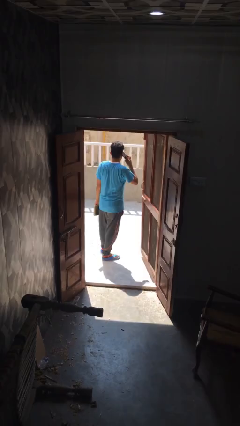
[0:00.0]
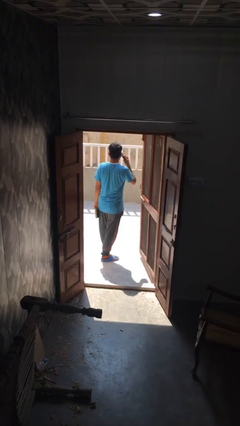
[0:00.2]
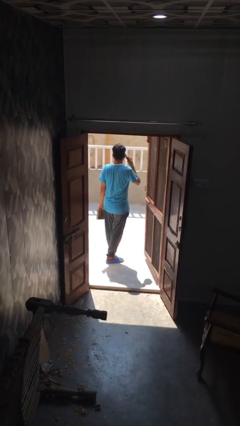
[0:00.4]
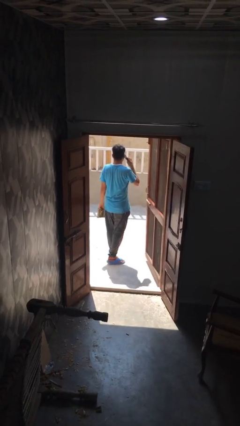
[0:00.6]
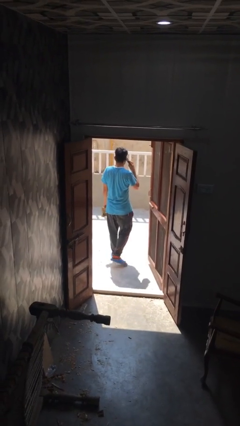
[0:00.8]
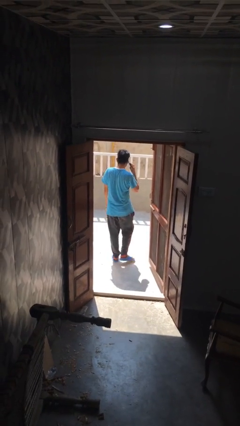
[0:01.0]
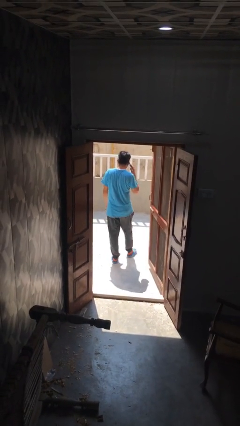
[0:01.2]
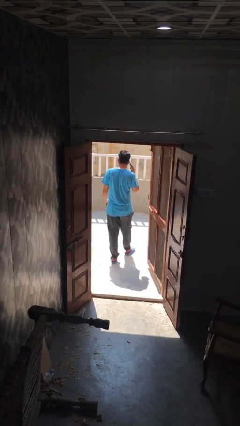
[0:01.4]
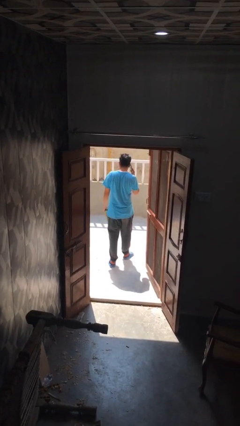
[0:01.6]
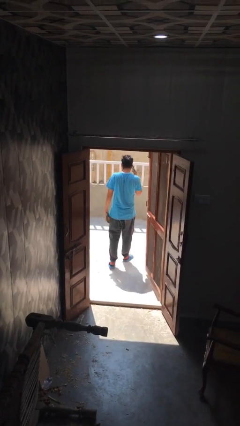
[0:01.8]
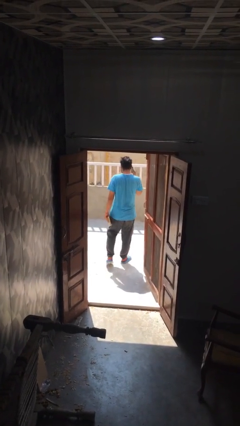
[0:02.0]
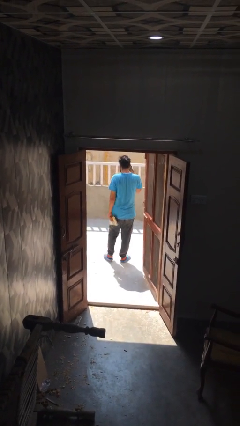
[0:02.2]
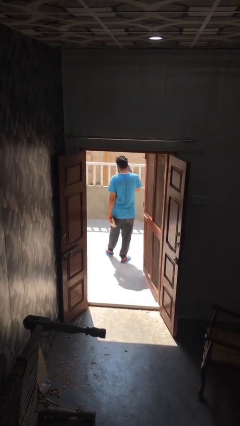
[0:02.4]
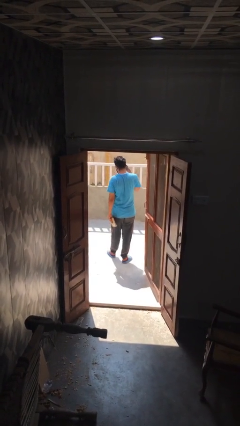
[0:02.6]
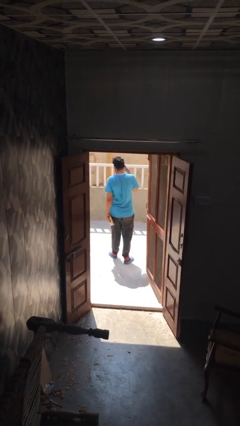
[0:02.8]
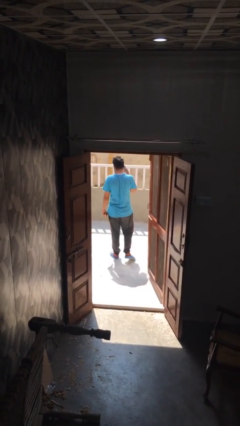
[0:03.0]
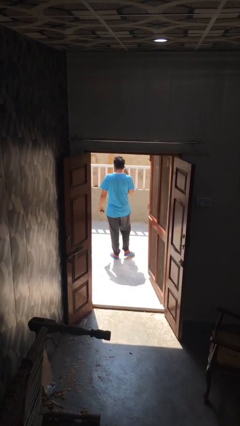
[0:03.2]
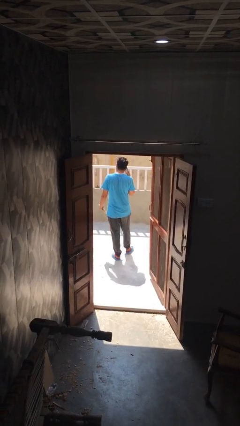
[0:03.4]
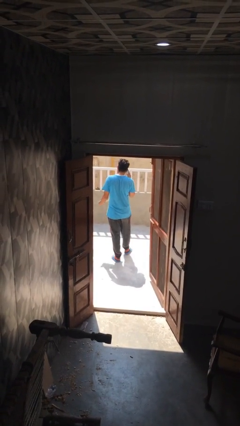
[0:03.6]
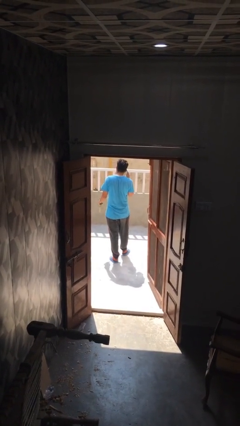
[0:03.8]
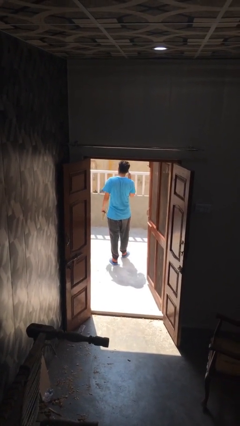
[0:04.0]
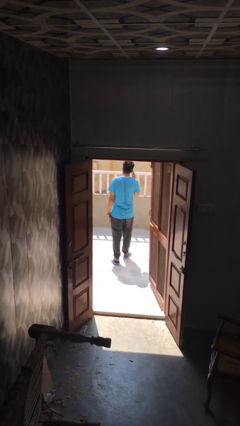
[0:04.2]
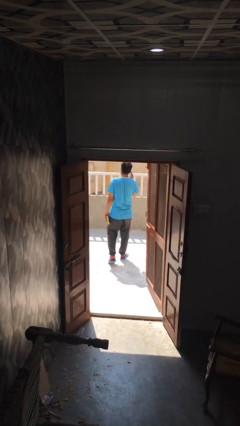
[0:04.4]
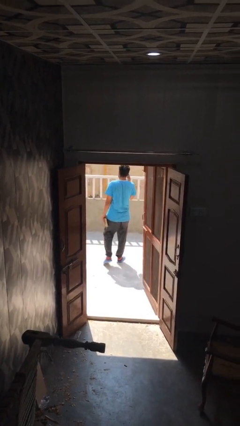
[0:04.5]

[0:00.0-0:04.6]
person talks on phone

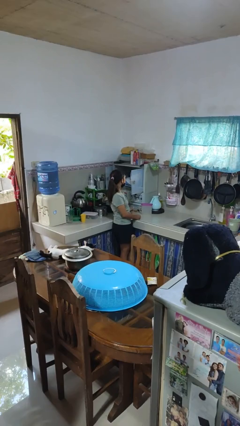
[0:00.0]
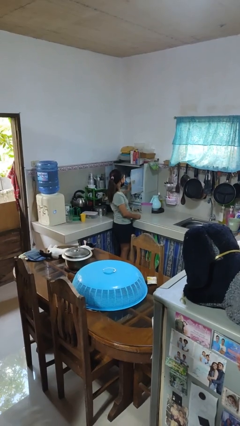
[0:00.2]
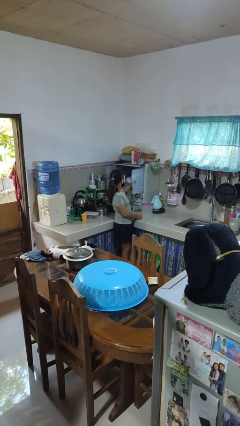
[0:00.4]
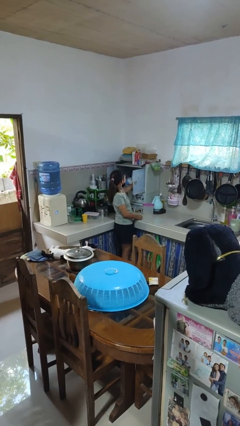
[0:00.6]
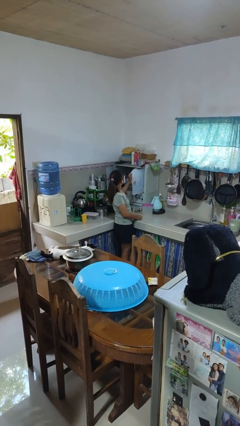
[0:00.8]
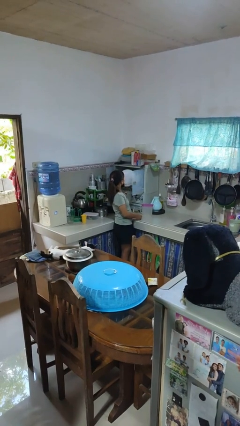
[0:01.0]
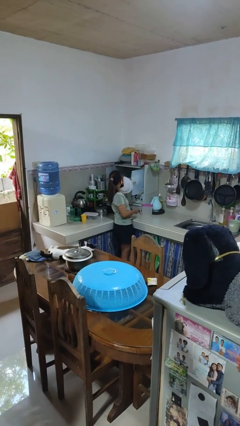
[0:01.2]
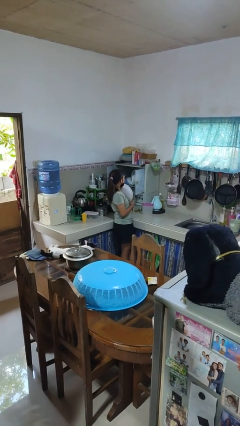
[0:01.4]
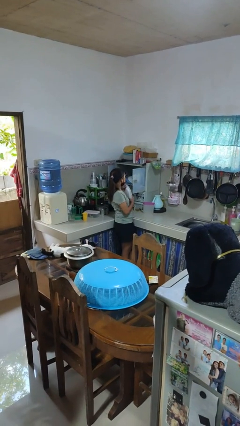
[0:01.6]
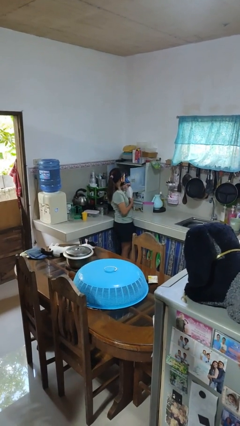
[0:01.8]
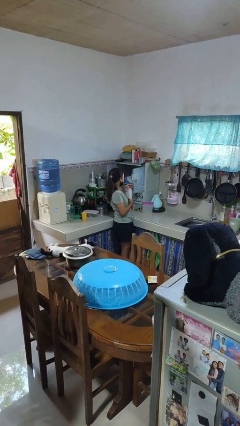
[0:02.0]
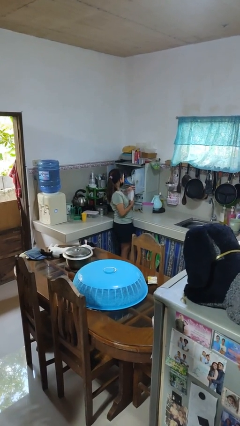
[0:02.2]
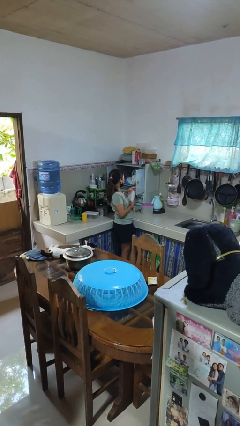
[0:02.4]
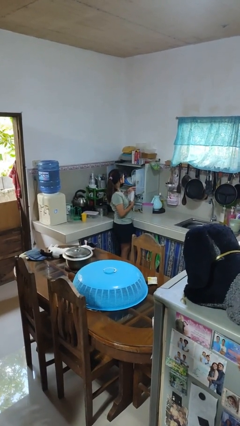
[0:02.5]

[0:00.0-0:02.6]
person takes object from kitchen drawer

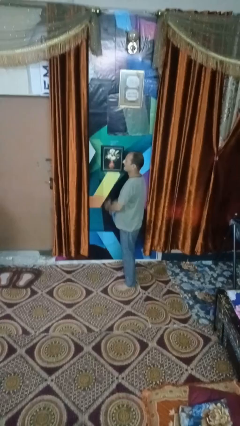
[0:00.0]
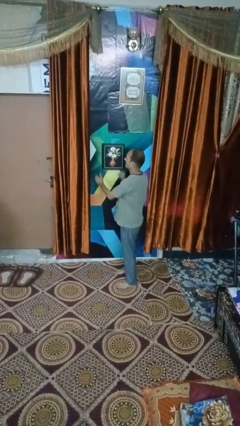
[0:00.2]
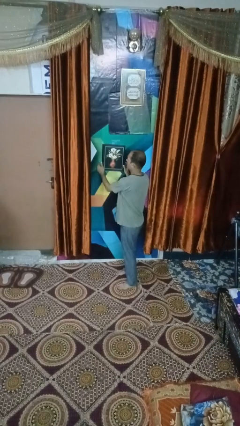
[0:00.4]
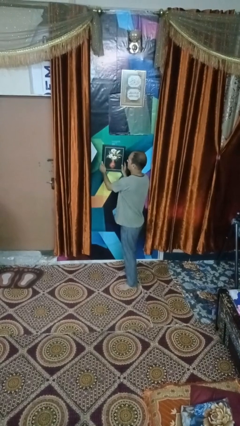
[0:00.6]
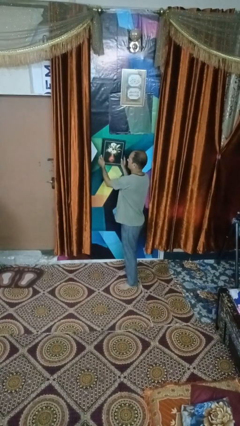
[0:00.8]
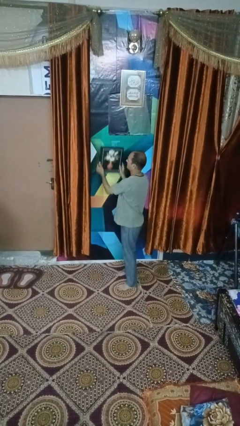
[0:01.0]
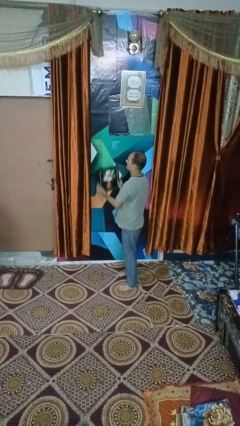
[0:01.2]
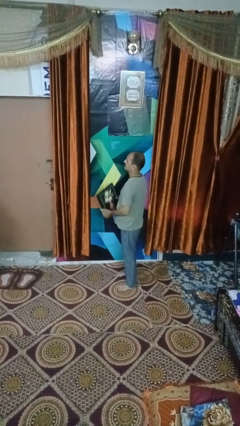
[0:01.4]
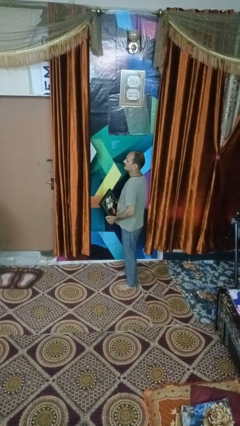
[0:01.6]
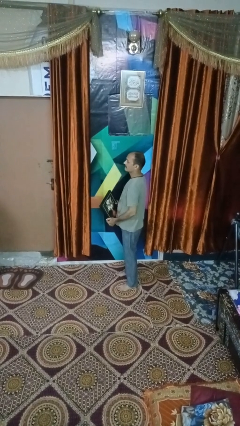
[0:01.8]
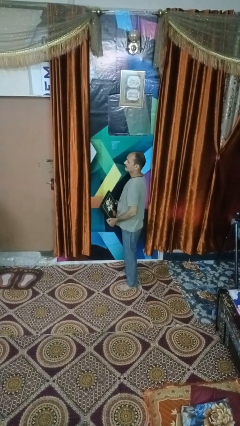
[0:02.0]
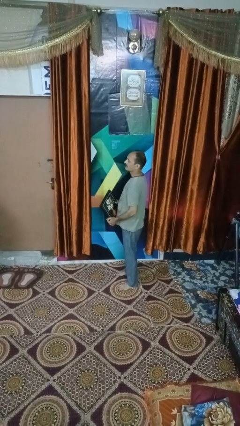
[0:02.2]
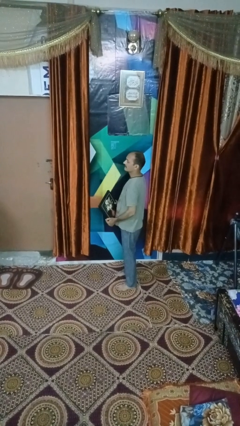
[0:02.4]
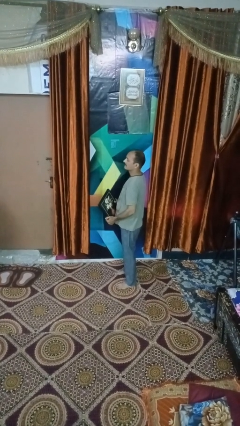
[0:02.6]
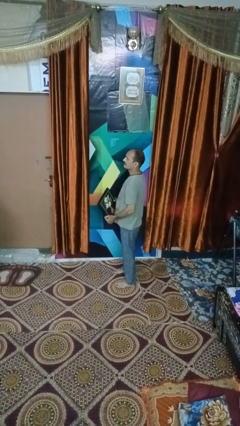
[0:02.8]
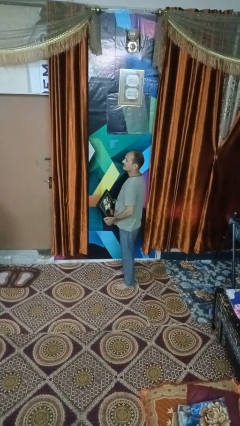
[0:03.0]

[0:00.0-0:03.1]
person takes down picture frame

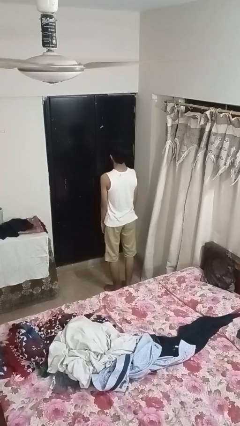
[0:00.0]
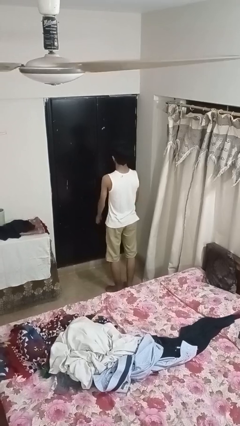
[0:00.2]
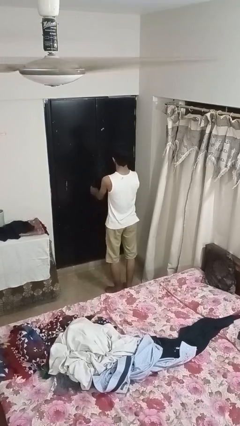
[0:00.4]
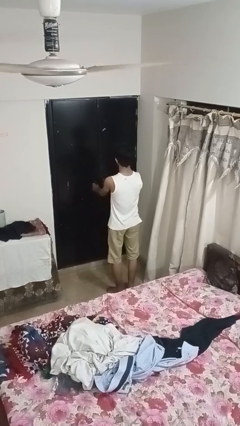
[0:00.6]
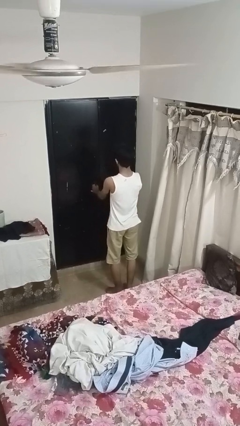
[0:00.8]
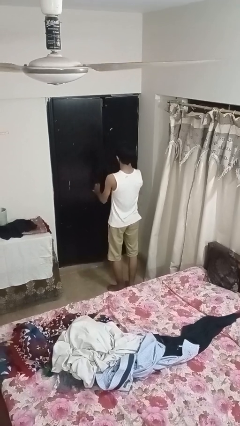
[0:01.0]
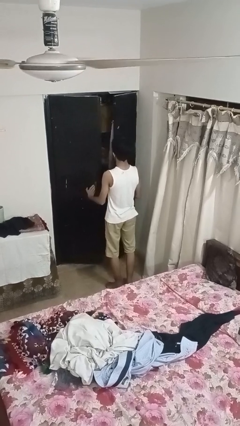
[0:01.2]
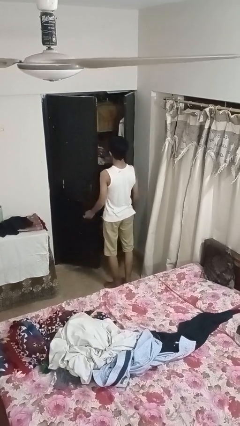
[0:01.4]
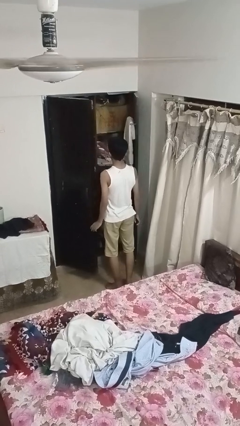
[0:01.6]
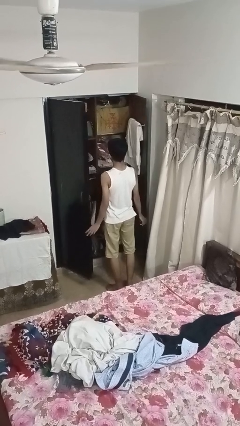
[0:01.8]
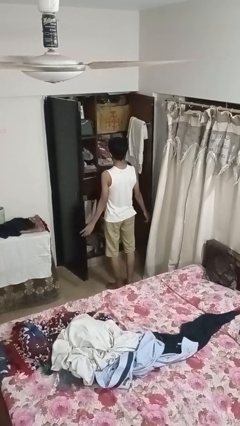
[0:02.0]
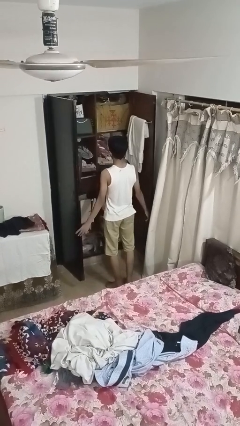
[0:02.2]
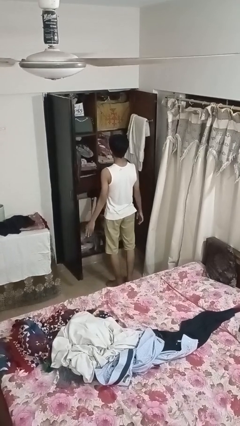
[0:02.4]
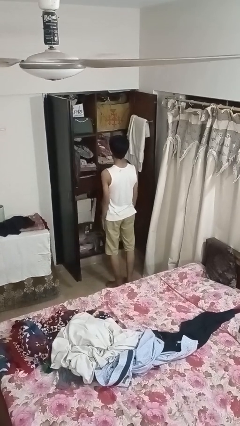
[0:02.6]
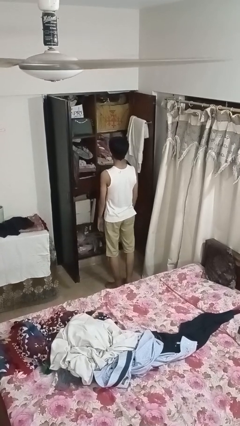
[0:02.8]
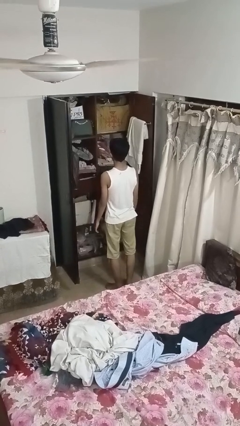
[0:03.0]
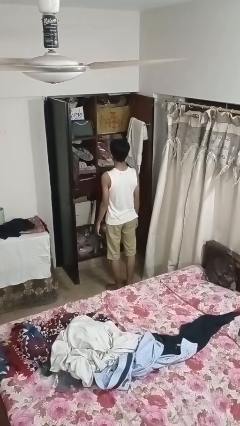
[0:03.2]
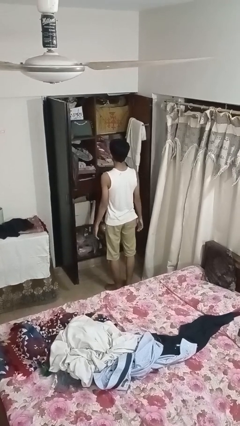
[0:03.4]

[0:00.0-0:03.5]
person opens closet door

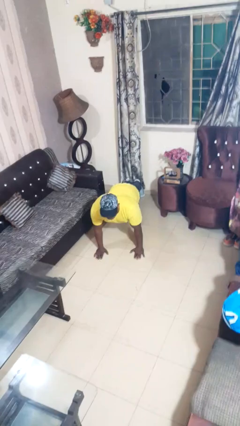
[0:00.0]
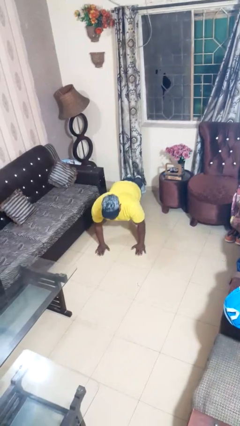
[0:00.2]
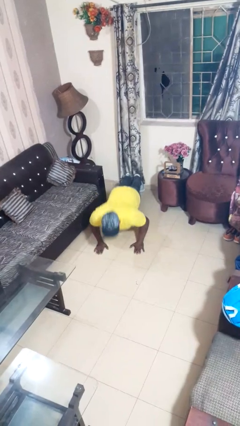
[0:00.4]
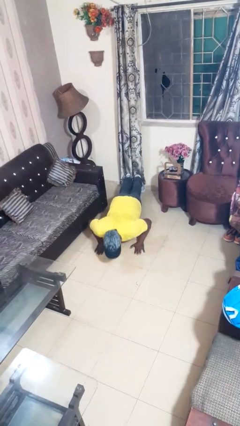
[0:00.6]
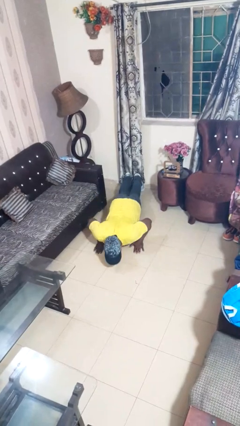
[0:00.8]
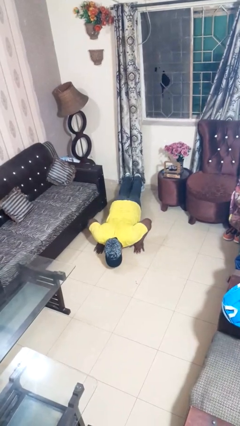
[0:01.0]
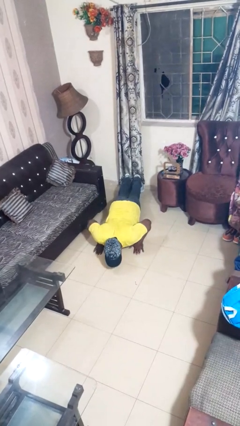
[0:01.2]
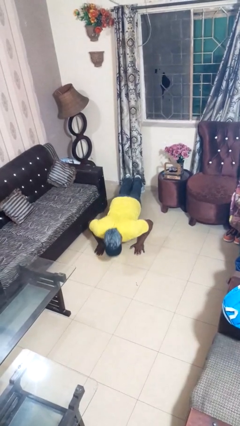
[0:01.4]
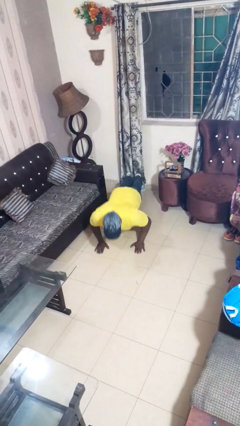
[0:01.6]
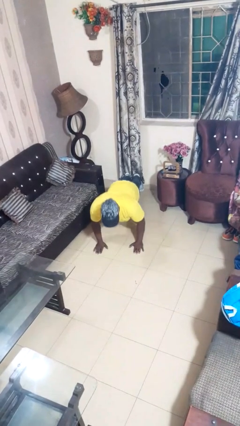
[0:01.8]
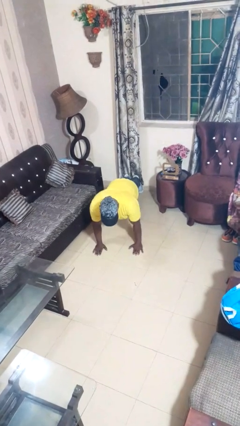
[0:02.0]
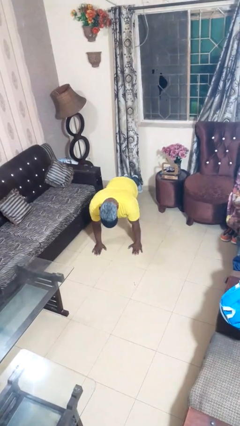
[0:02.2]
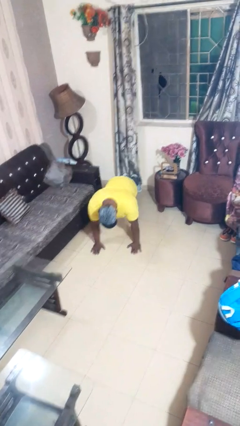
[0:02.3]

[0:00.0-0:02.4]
person exercises with pushup

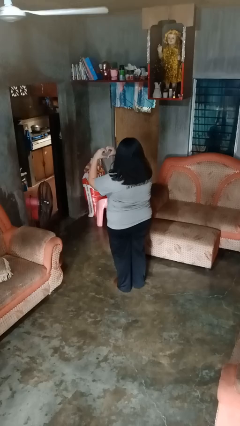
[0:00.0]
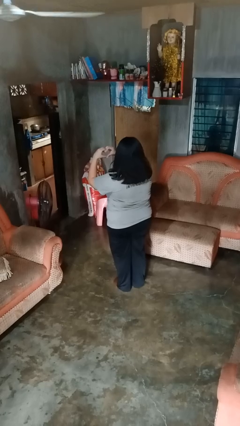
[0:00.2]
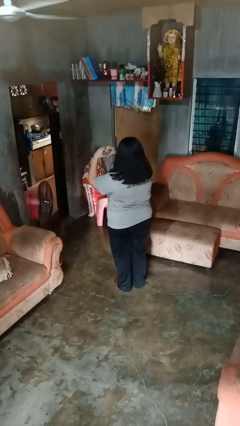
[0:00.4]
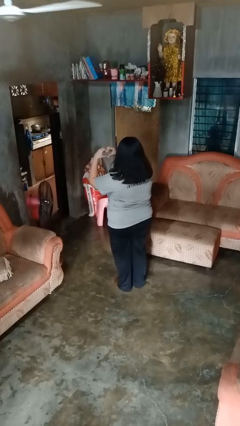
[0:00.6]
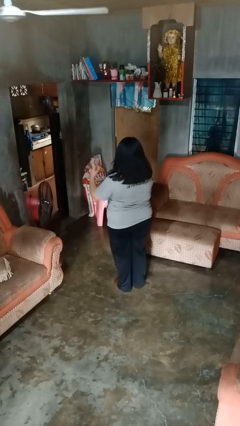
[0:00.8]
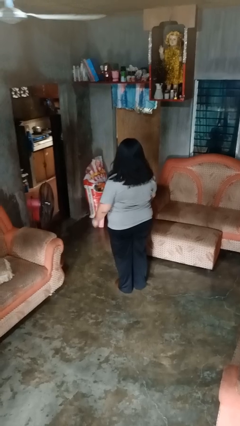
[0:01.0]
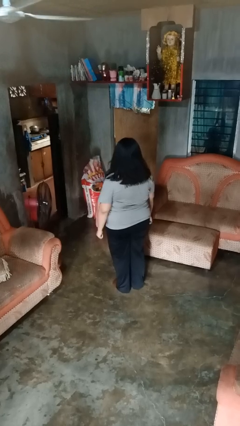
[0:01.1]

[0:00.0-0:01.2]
person gestures heart

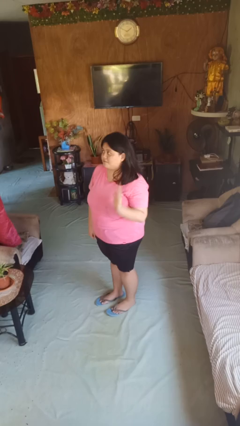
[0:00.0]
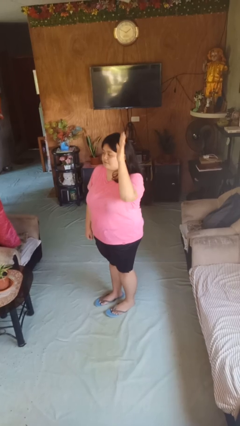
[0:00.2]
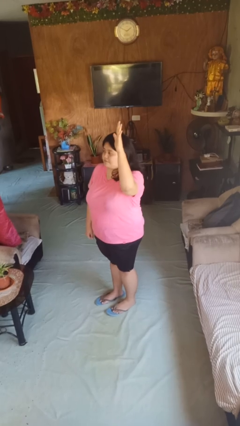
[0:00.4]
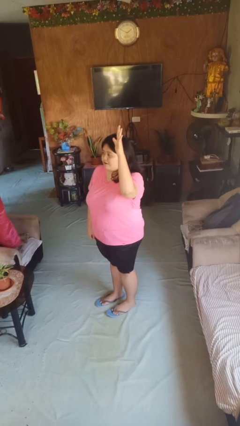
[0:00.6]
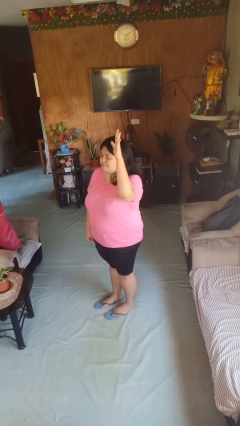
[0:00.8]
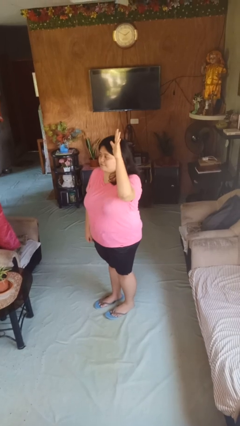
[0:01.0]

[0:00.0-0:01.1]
person gestures raise hand
